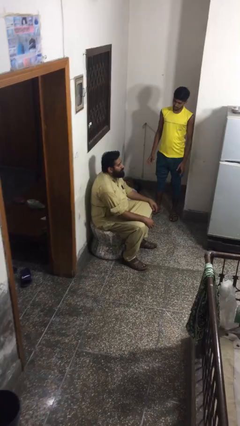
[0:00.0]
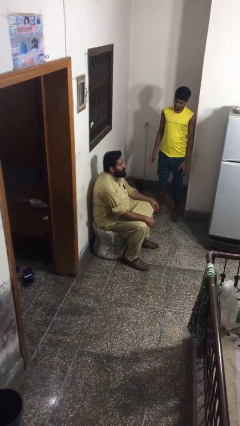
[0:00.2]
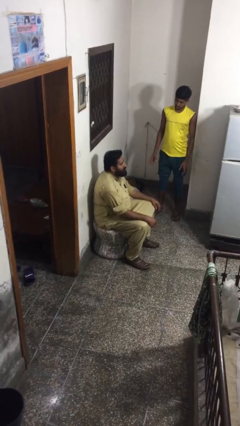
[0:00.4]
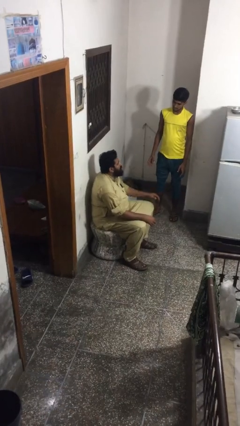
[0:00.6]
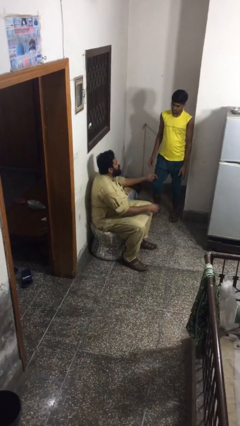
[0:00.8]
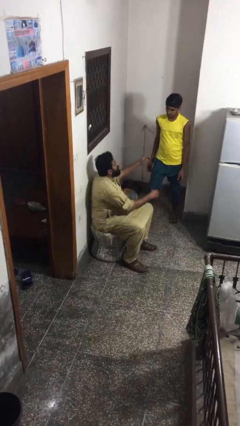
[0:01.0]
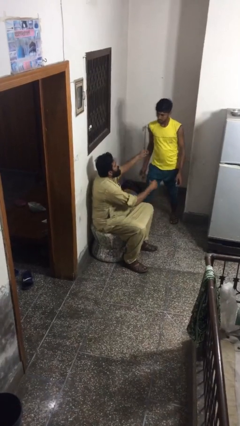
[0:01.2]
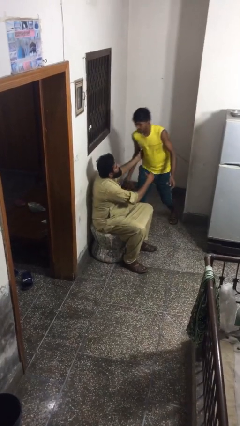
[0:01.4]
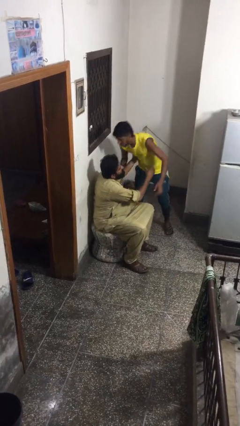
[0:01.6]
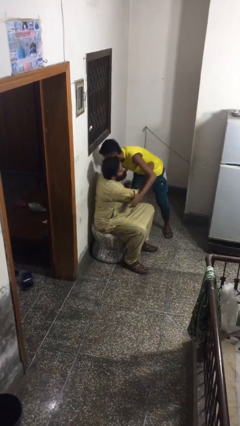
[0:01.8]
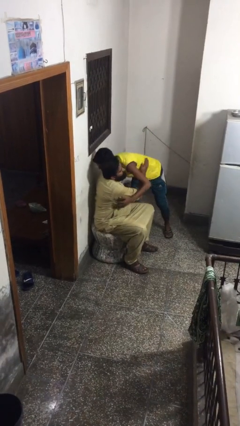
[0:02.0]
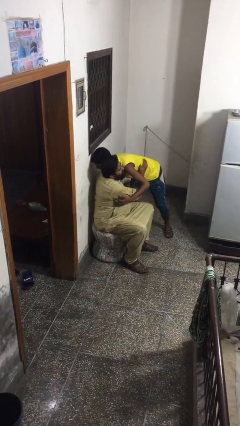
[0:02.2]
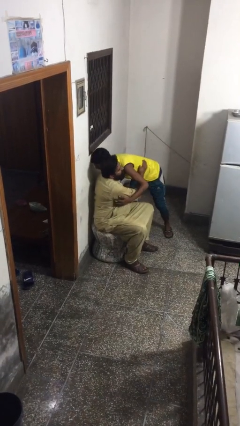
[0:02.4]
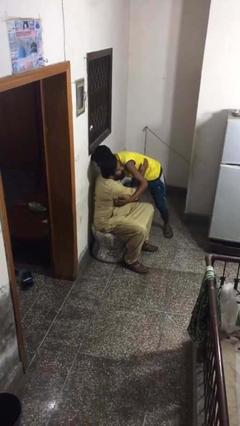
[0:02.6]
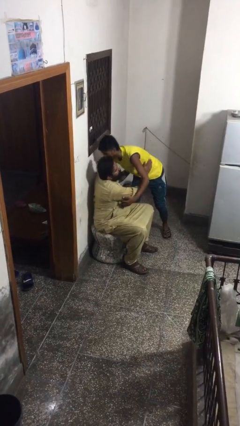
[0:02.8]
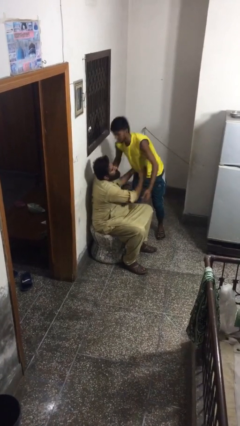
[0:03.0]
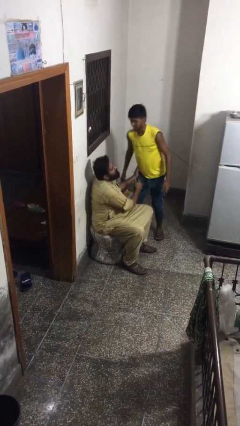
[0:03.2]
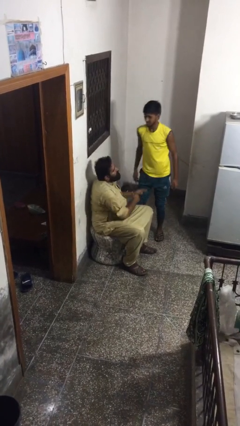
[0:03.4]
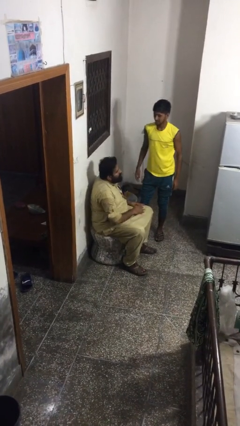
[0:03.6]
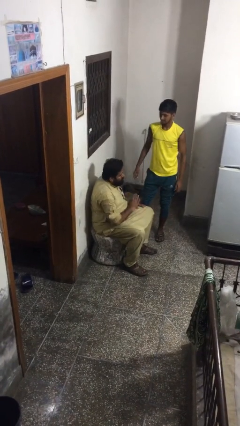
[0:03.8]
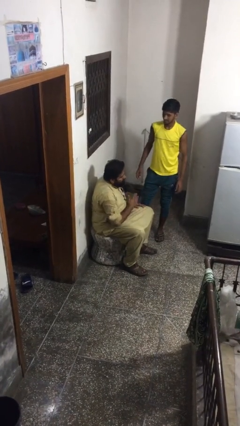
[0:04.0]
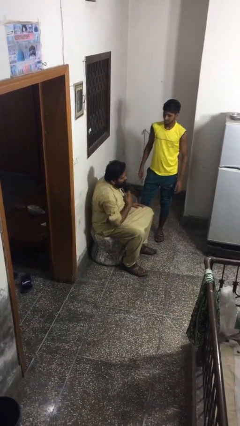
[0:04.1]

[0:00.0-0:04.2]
person embraces person

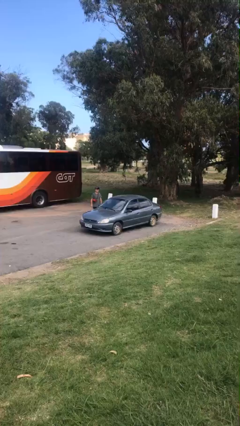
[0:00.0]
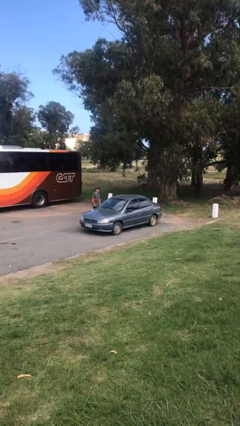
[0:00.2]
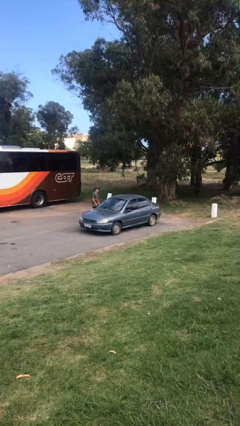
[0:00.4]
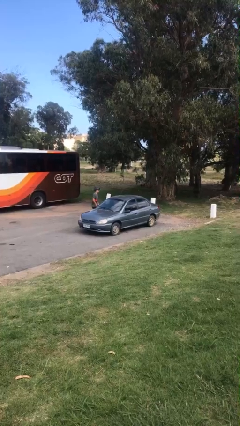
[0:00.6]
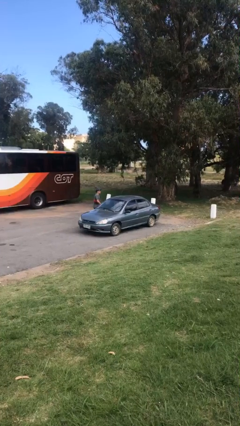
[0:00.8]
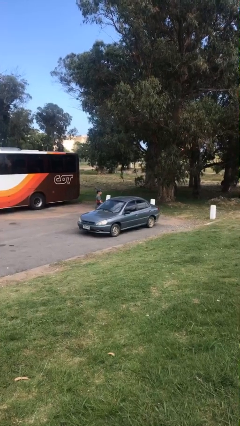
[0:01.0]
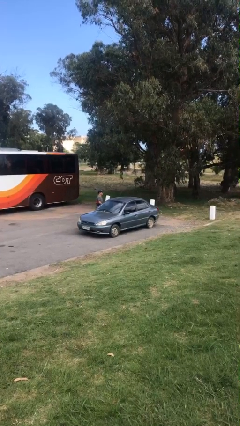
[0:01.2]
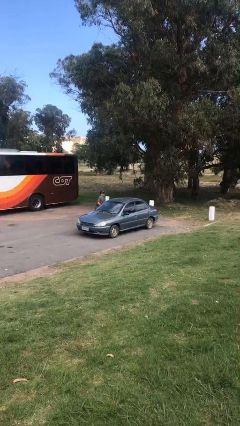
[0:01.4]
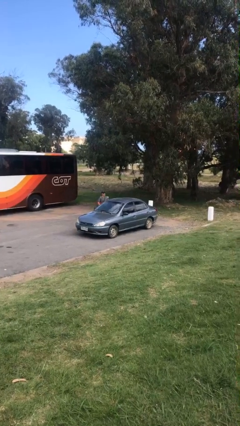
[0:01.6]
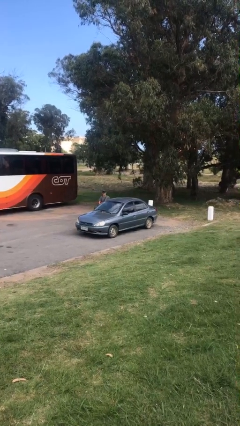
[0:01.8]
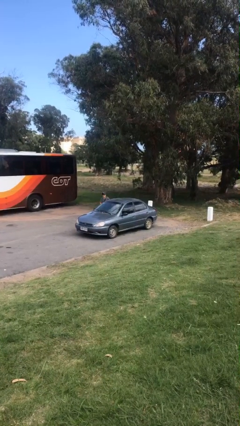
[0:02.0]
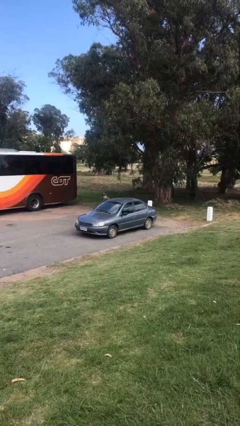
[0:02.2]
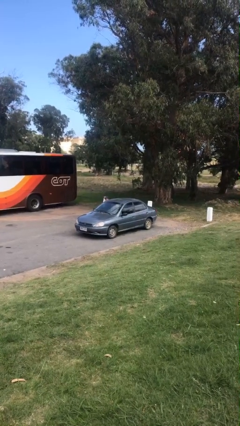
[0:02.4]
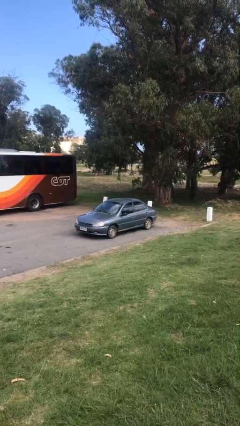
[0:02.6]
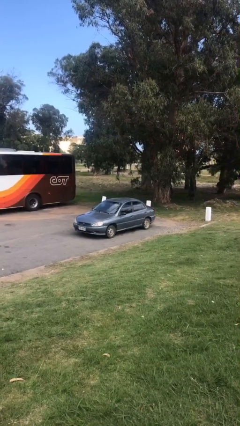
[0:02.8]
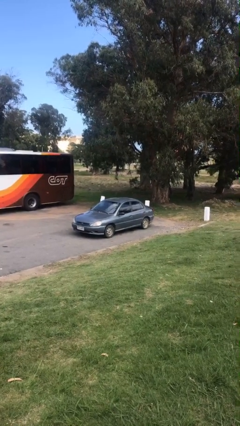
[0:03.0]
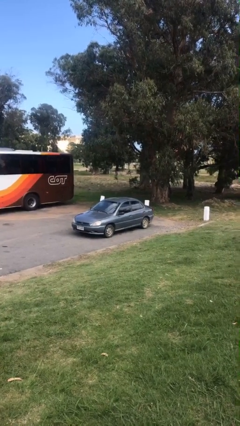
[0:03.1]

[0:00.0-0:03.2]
car picks up person

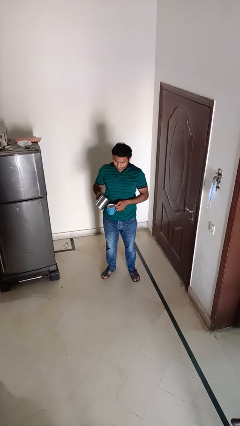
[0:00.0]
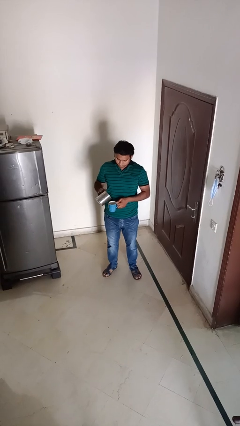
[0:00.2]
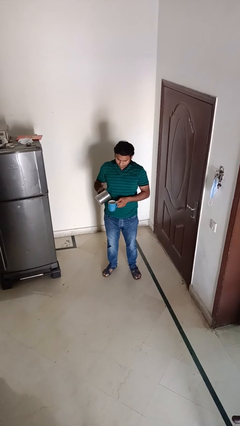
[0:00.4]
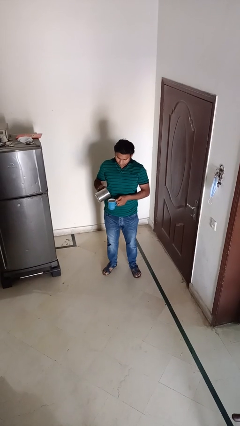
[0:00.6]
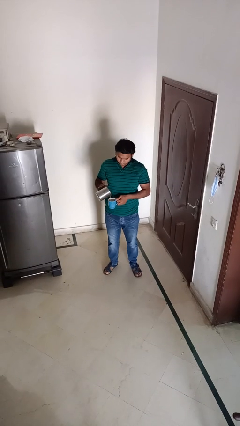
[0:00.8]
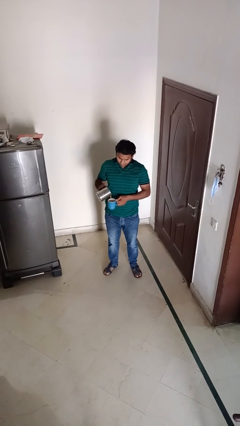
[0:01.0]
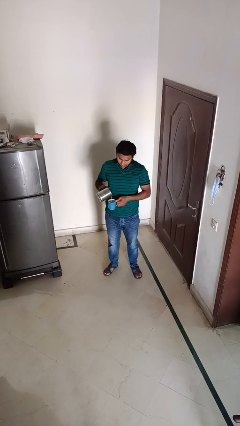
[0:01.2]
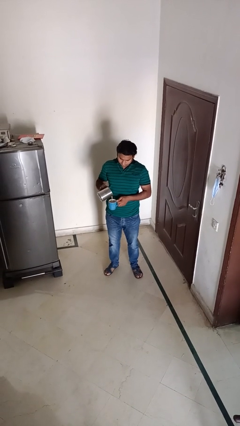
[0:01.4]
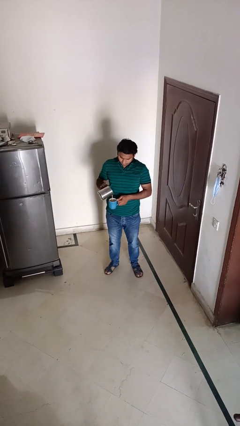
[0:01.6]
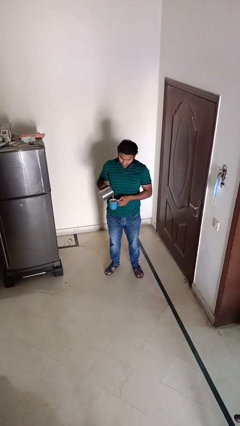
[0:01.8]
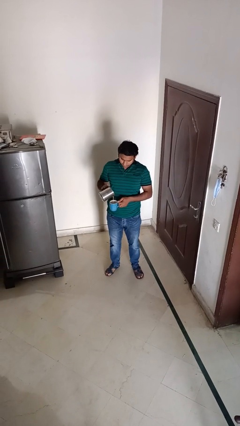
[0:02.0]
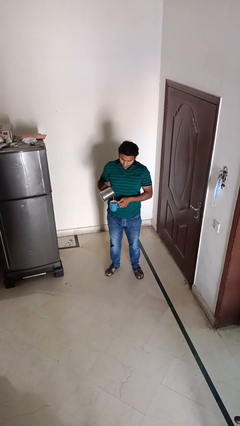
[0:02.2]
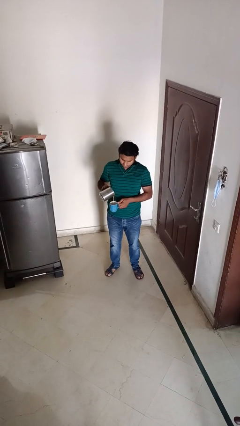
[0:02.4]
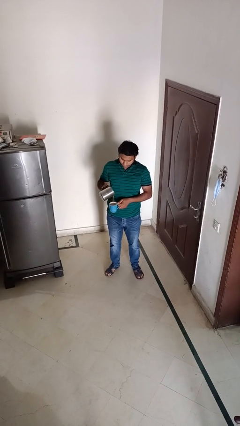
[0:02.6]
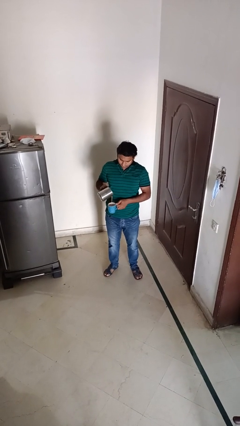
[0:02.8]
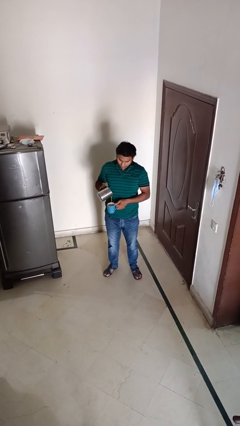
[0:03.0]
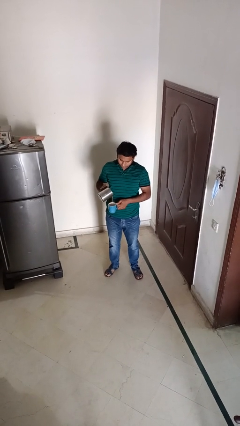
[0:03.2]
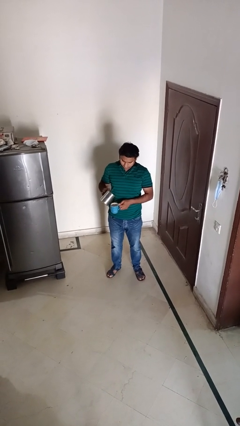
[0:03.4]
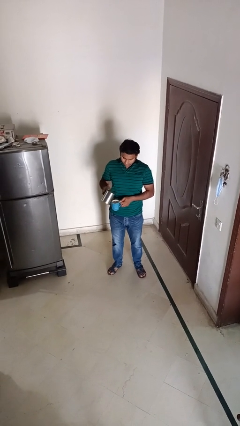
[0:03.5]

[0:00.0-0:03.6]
person pours coffee into mug

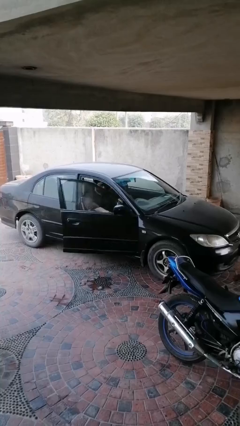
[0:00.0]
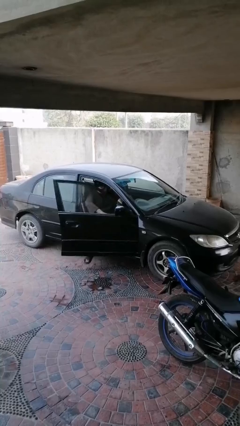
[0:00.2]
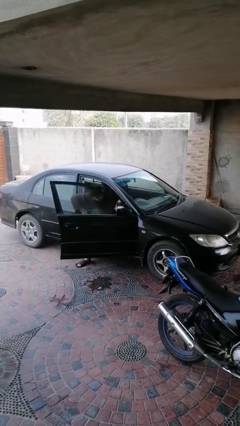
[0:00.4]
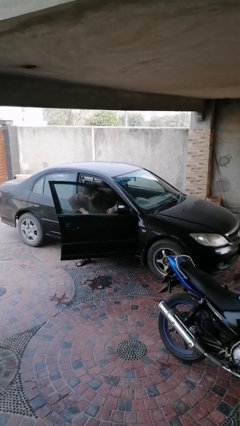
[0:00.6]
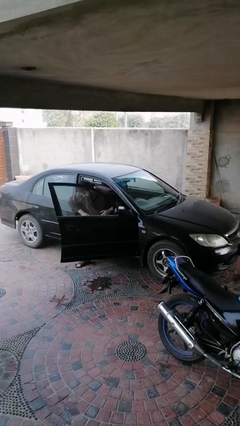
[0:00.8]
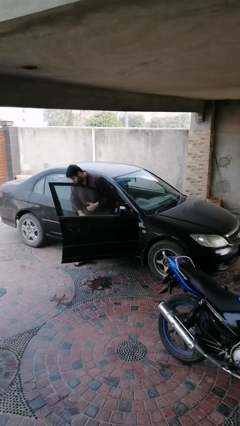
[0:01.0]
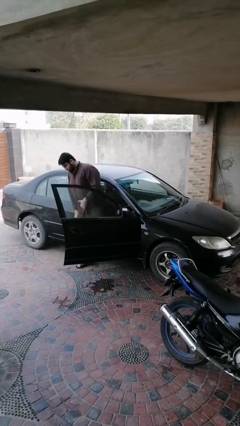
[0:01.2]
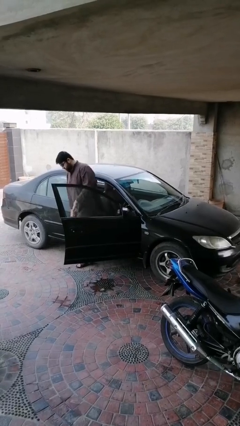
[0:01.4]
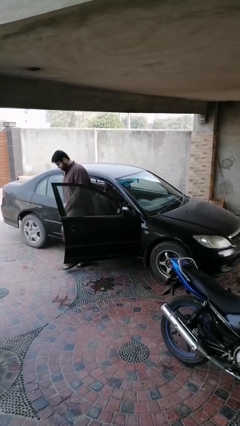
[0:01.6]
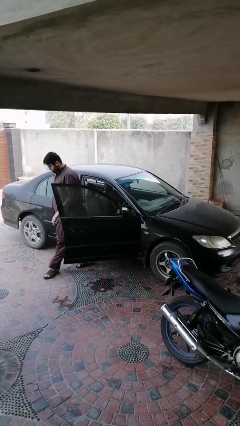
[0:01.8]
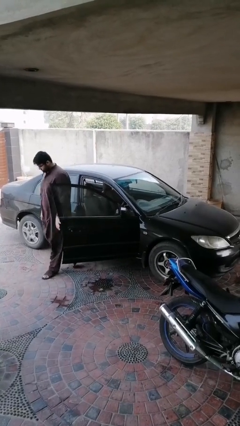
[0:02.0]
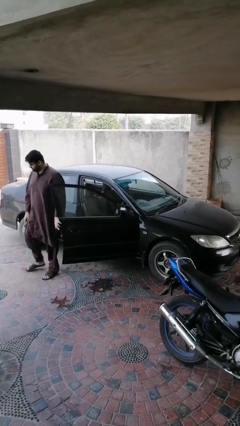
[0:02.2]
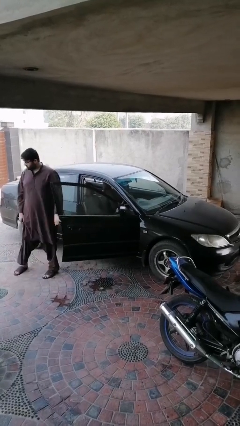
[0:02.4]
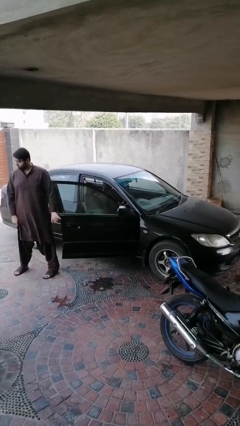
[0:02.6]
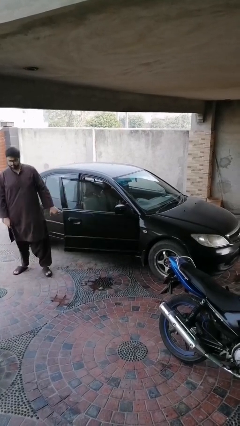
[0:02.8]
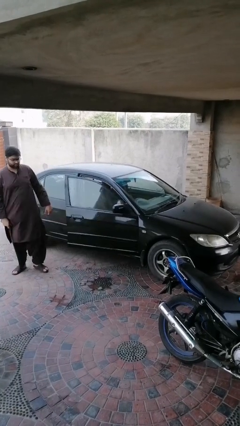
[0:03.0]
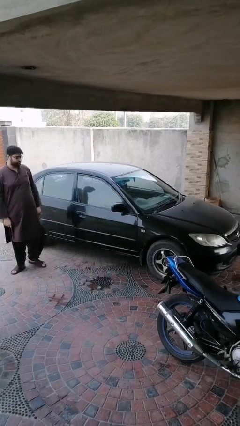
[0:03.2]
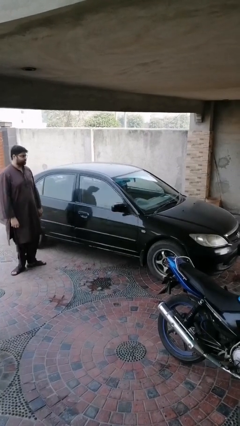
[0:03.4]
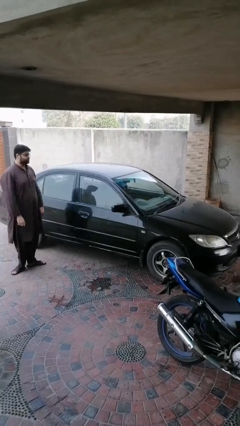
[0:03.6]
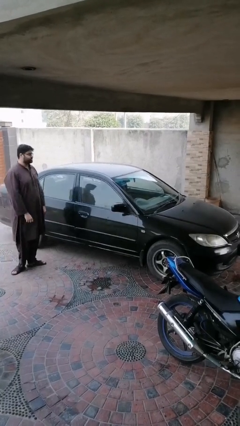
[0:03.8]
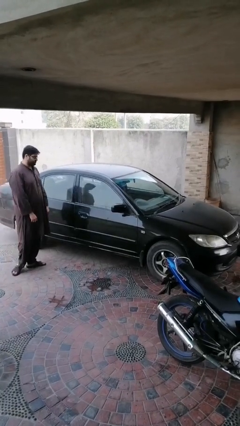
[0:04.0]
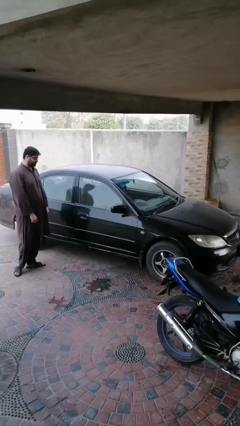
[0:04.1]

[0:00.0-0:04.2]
car drops off person

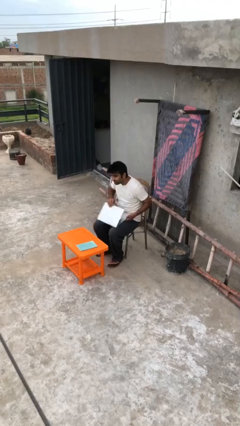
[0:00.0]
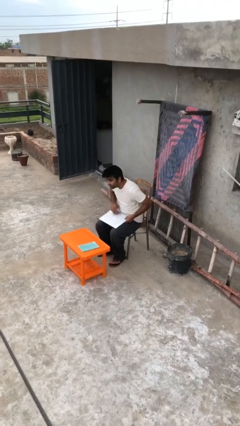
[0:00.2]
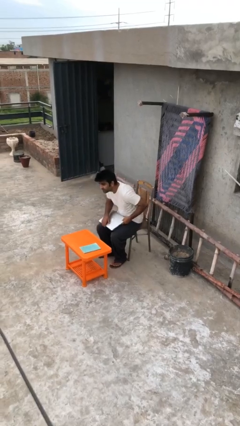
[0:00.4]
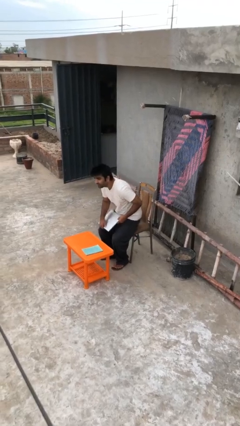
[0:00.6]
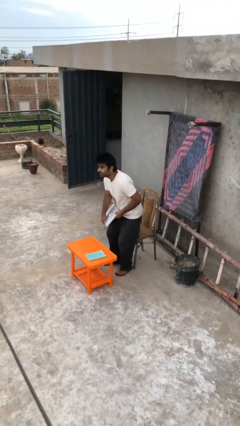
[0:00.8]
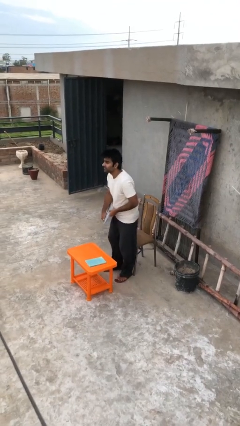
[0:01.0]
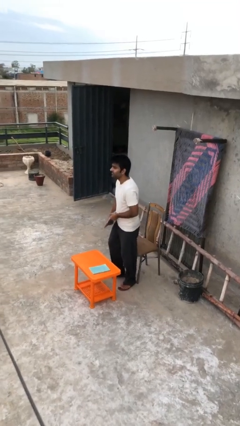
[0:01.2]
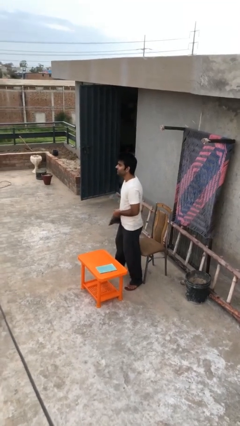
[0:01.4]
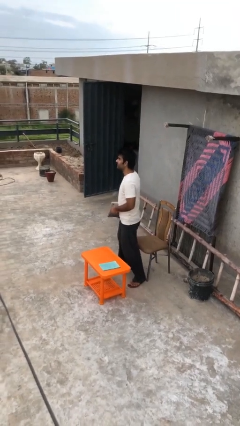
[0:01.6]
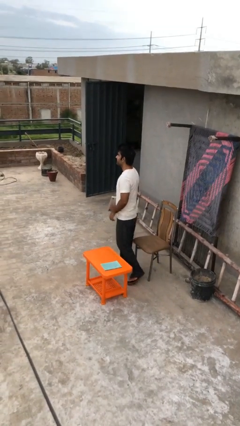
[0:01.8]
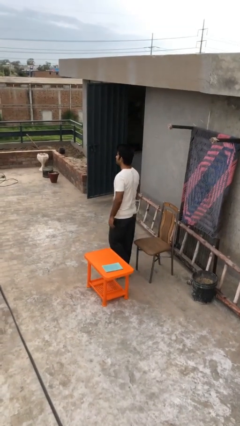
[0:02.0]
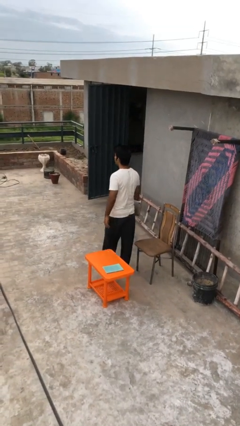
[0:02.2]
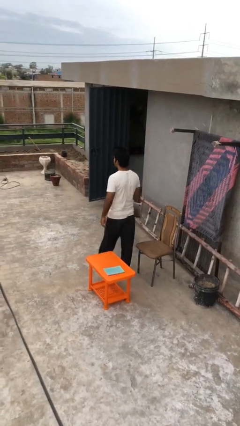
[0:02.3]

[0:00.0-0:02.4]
person stands up
